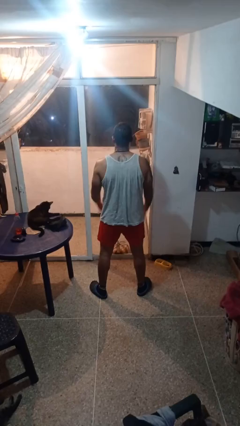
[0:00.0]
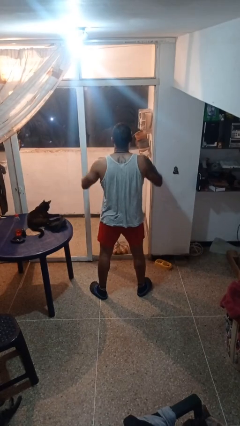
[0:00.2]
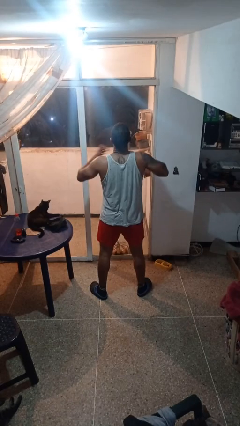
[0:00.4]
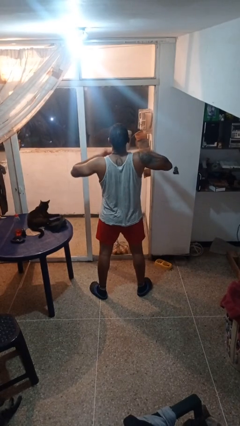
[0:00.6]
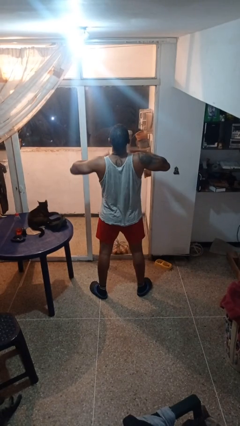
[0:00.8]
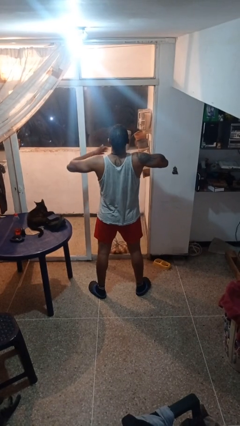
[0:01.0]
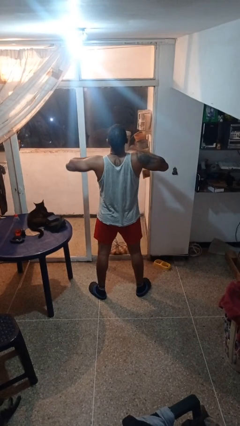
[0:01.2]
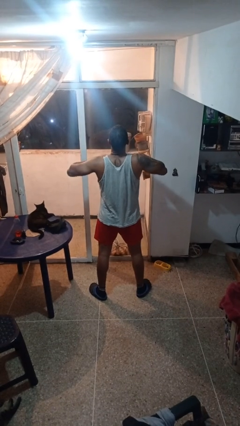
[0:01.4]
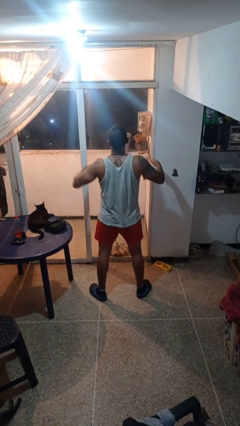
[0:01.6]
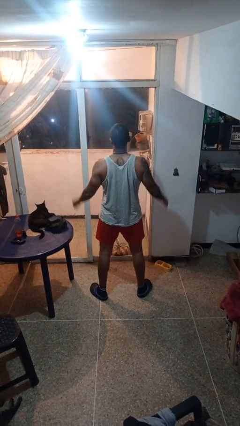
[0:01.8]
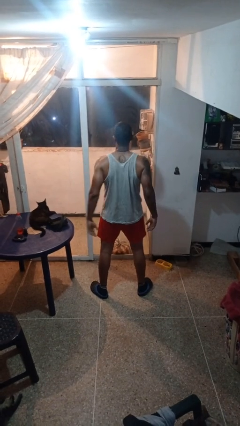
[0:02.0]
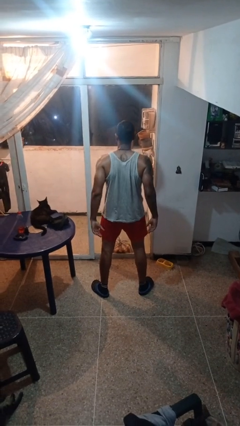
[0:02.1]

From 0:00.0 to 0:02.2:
person drums on chest

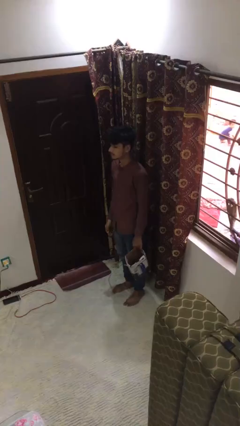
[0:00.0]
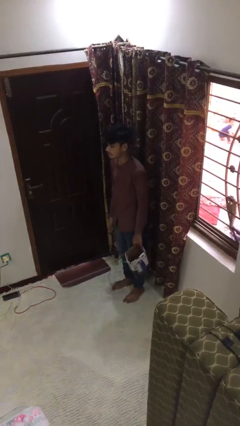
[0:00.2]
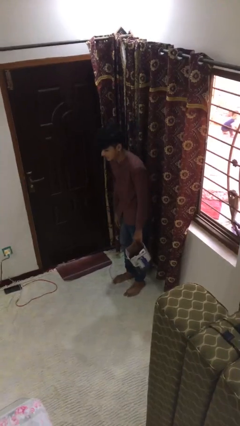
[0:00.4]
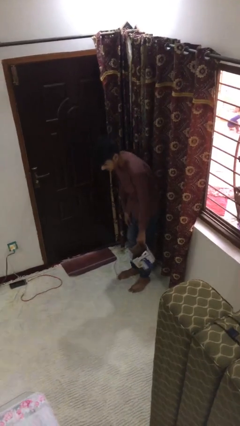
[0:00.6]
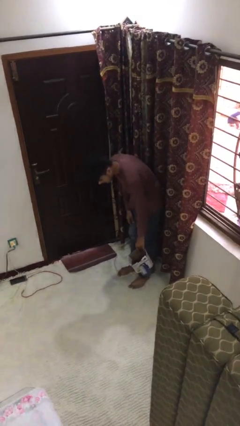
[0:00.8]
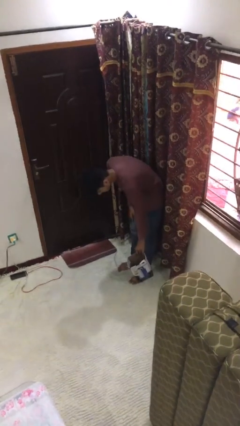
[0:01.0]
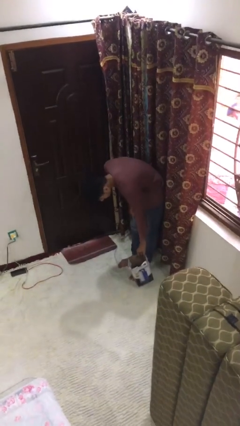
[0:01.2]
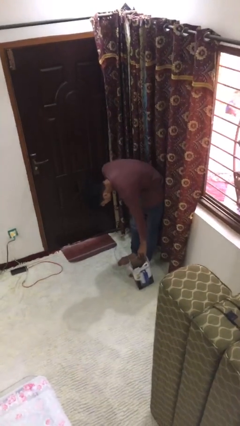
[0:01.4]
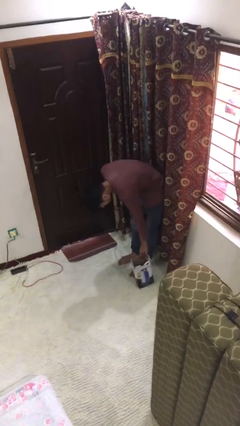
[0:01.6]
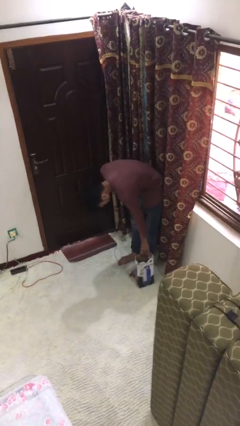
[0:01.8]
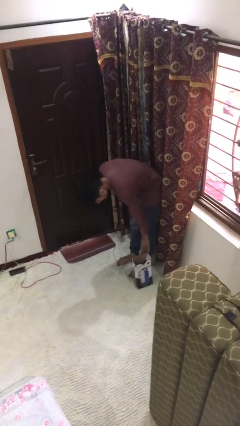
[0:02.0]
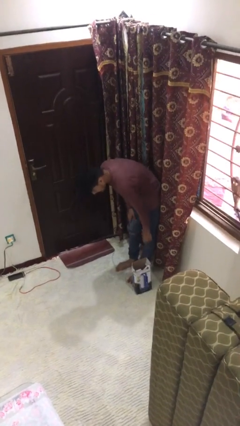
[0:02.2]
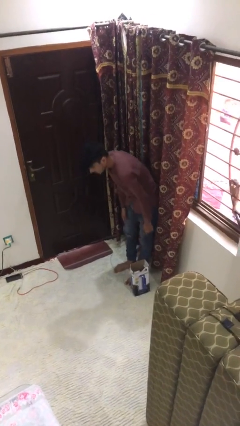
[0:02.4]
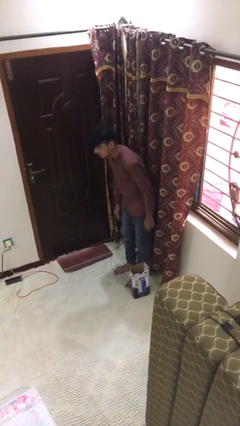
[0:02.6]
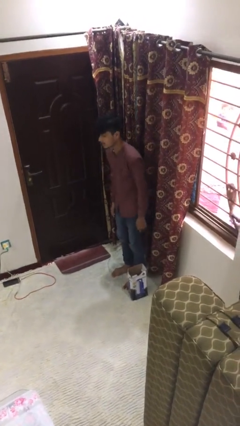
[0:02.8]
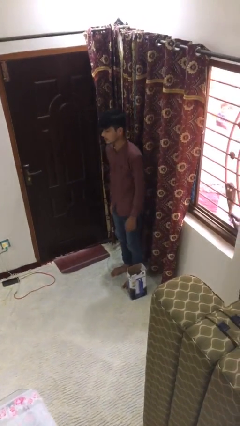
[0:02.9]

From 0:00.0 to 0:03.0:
person puts down object on floor

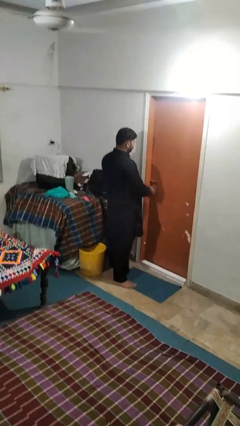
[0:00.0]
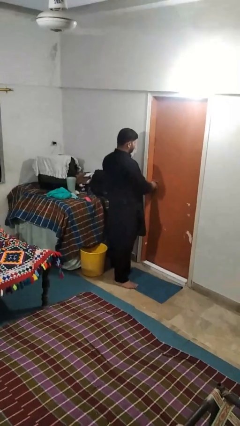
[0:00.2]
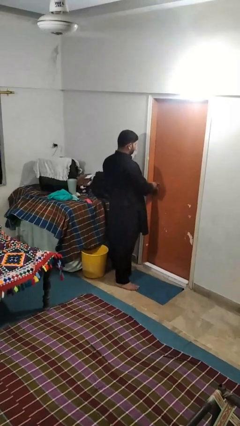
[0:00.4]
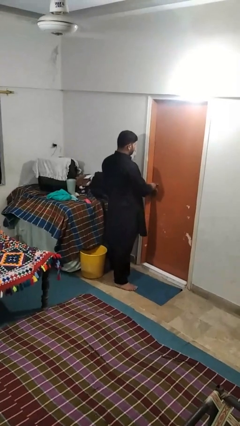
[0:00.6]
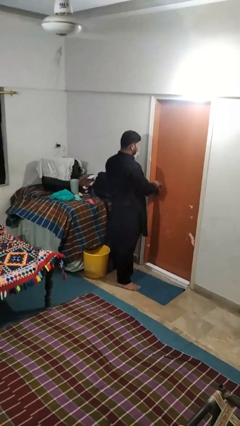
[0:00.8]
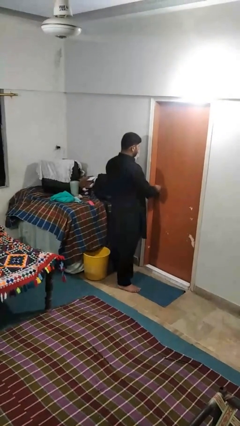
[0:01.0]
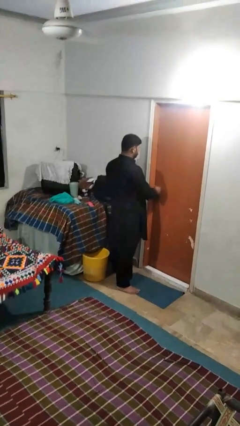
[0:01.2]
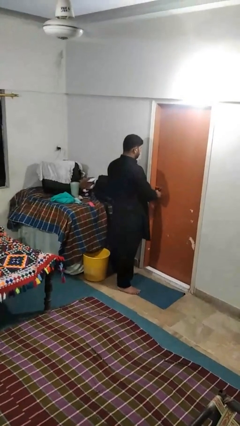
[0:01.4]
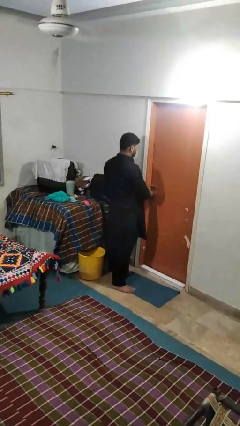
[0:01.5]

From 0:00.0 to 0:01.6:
person unlocks door with keys

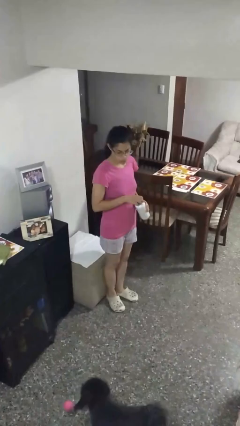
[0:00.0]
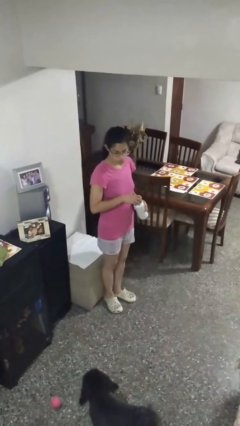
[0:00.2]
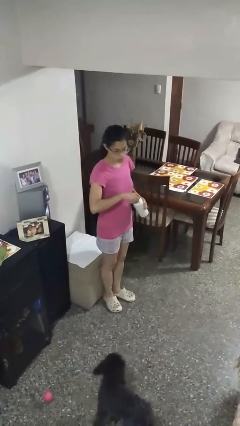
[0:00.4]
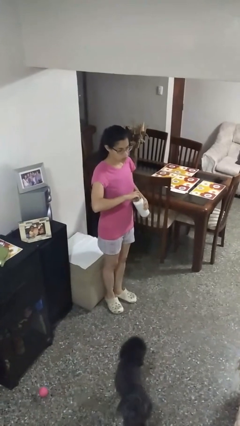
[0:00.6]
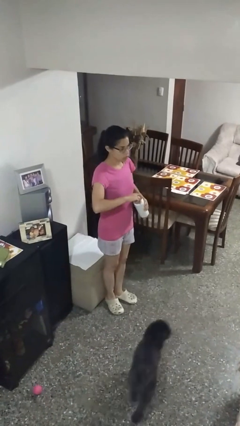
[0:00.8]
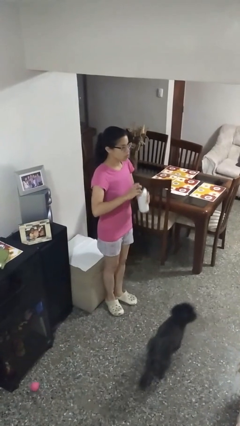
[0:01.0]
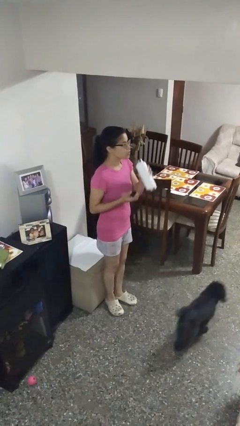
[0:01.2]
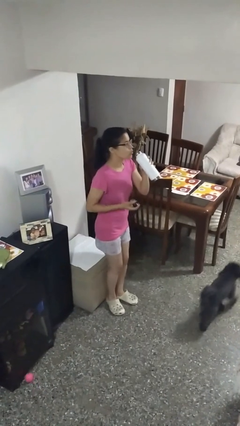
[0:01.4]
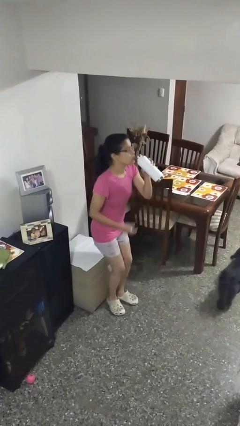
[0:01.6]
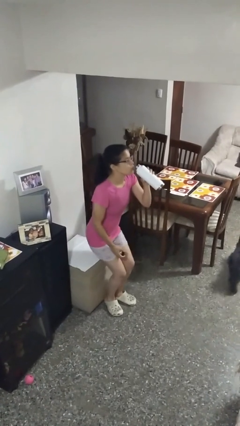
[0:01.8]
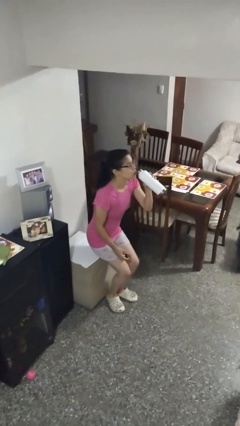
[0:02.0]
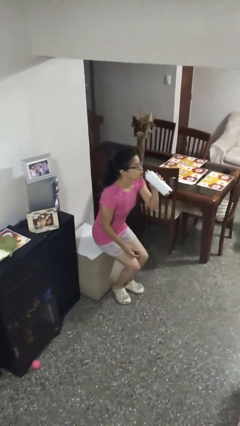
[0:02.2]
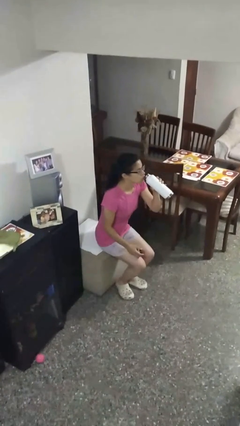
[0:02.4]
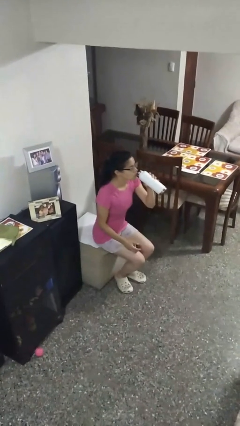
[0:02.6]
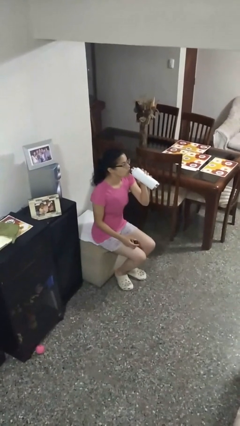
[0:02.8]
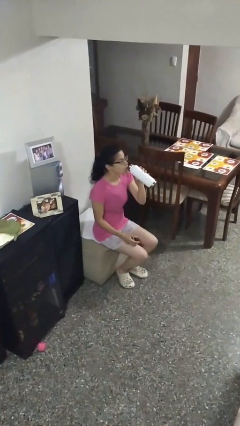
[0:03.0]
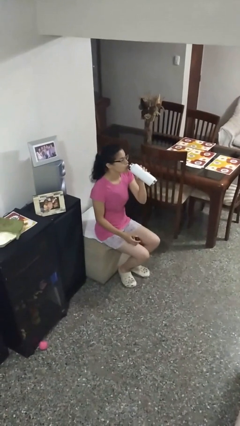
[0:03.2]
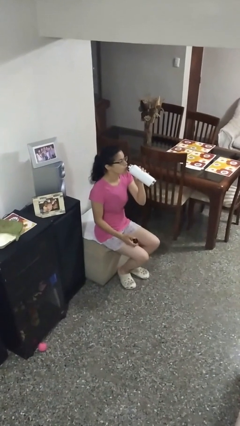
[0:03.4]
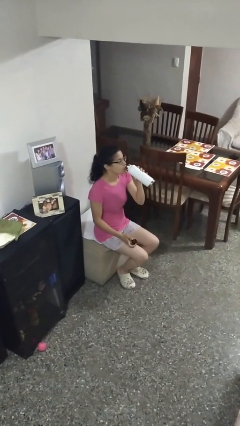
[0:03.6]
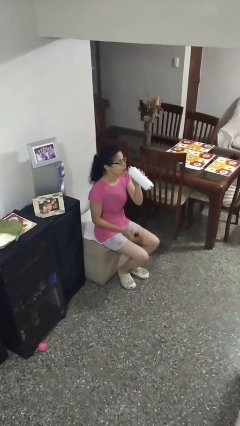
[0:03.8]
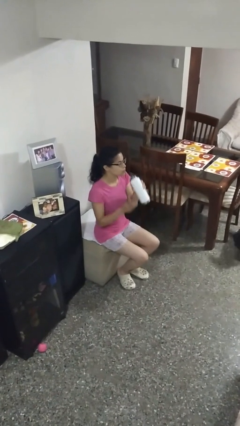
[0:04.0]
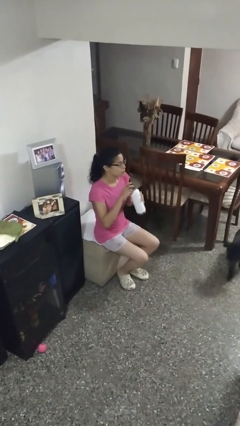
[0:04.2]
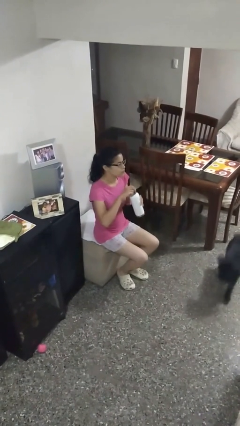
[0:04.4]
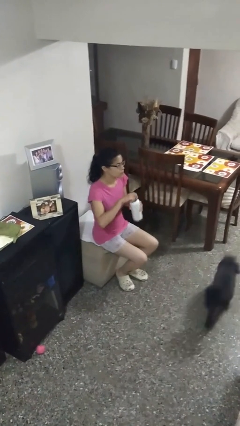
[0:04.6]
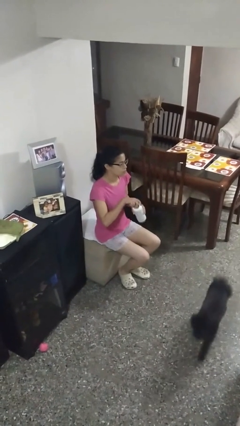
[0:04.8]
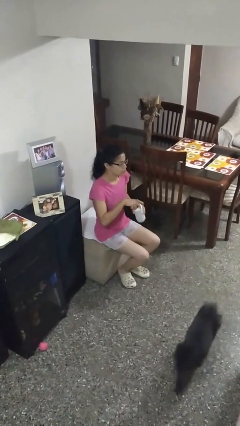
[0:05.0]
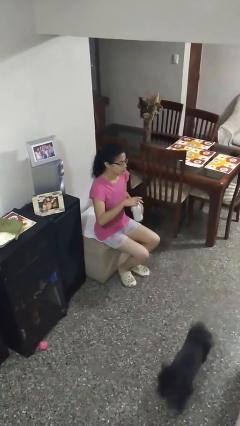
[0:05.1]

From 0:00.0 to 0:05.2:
person drinks from bottle

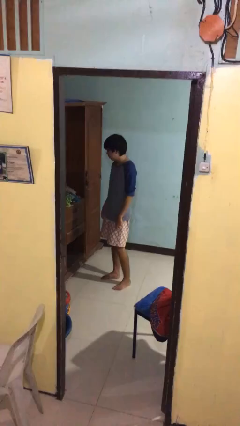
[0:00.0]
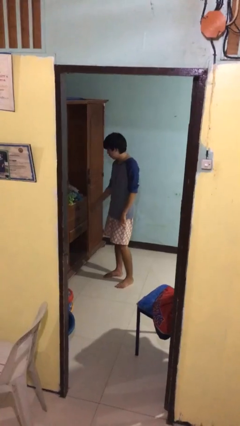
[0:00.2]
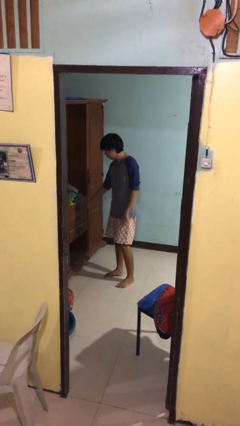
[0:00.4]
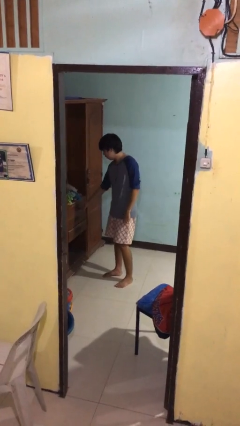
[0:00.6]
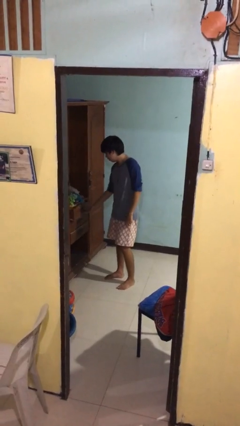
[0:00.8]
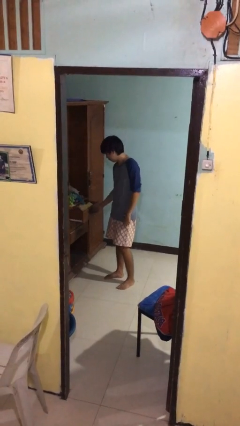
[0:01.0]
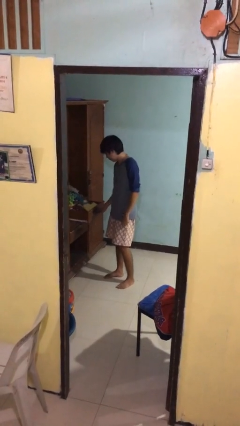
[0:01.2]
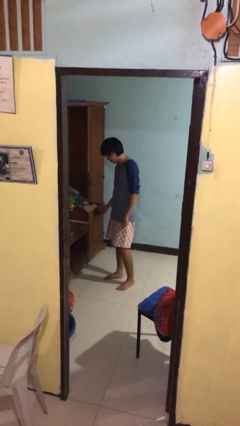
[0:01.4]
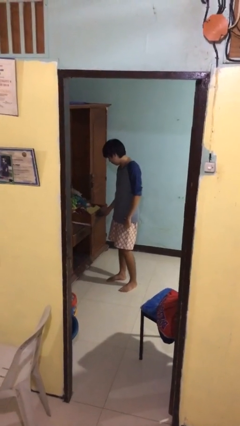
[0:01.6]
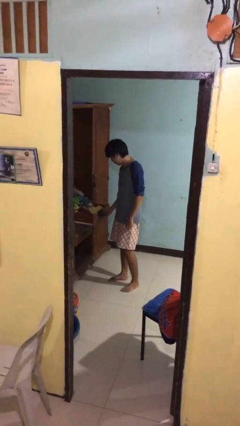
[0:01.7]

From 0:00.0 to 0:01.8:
person opens dresser drawer

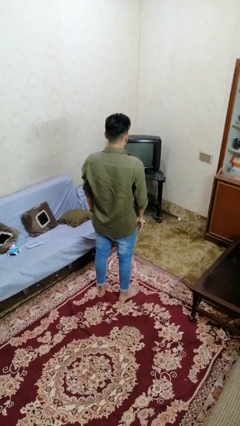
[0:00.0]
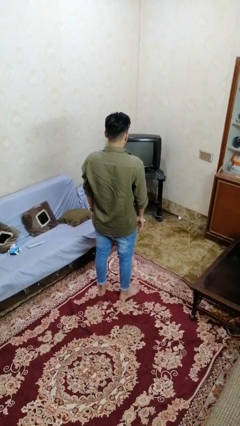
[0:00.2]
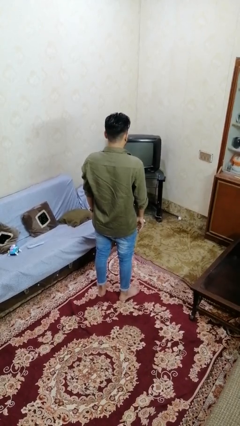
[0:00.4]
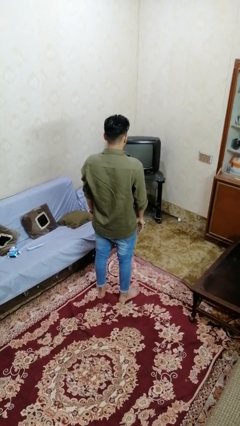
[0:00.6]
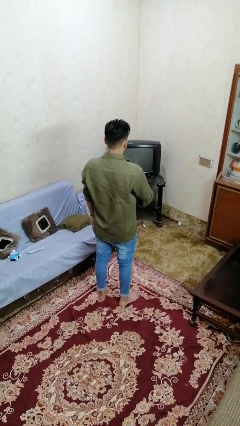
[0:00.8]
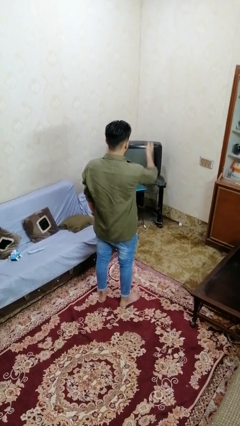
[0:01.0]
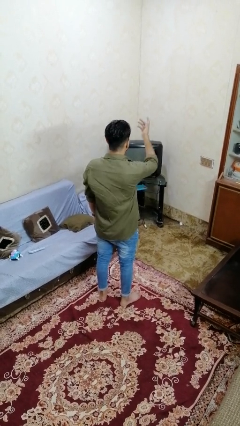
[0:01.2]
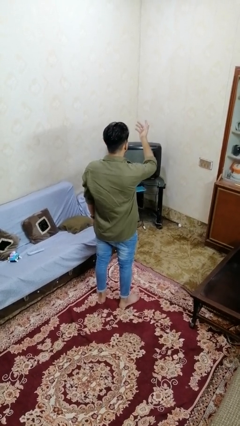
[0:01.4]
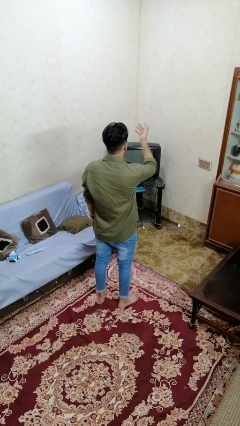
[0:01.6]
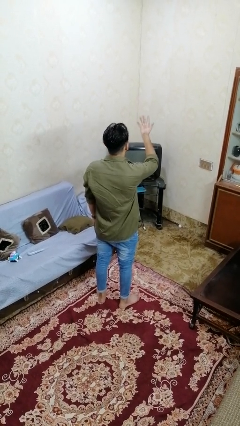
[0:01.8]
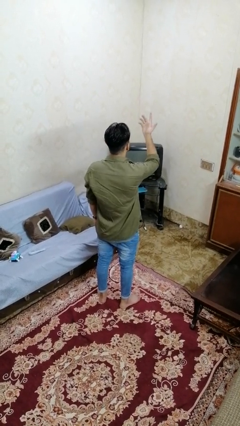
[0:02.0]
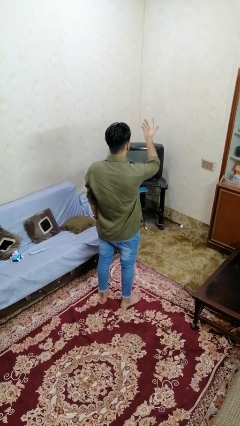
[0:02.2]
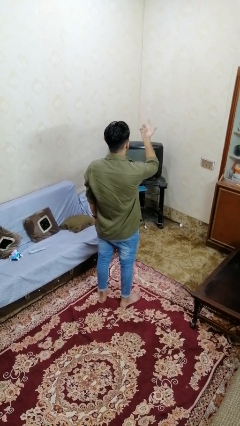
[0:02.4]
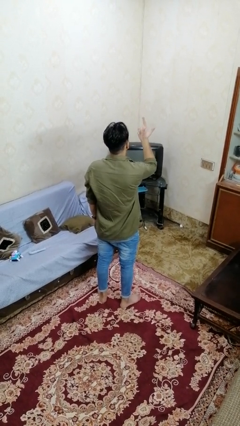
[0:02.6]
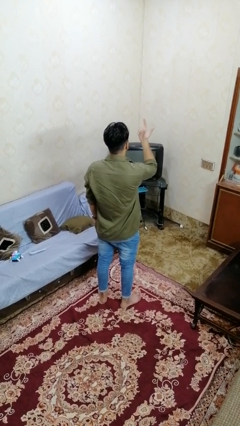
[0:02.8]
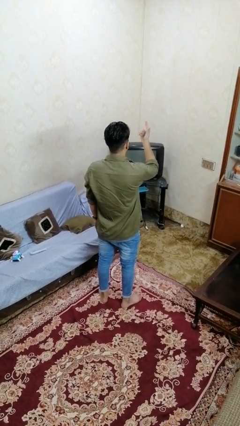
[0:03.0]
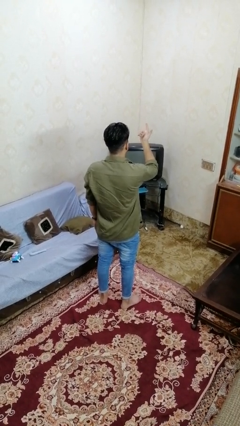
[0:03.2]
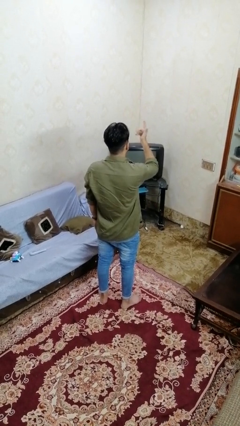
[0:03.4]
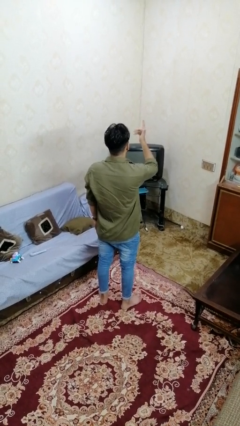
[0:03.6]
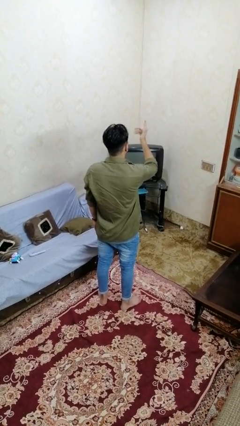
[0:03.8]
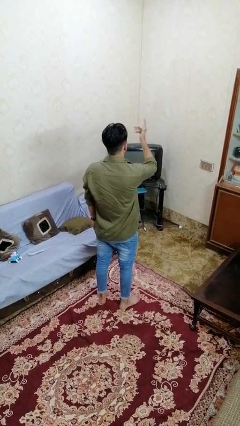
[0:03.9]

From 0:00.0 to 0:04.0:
person gestures raise hand
